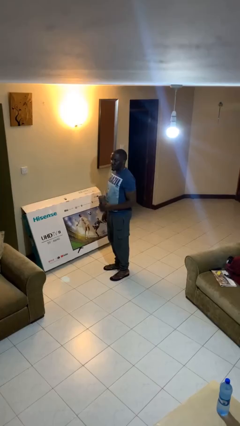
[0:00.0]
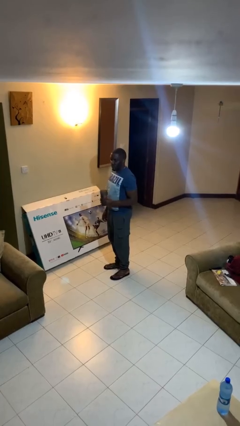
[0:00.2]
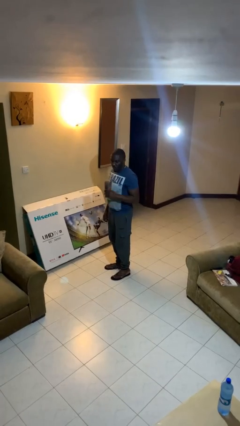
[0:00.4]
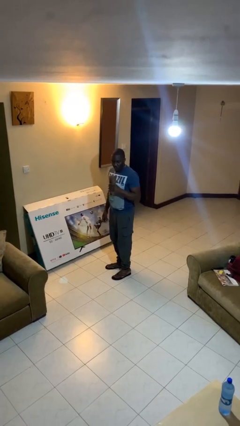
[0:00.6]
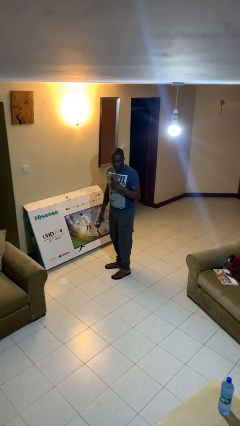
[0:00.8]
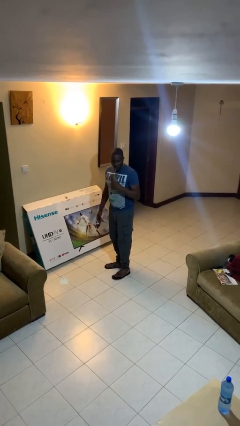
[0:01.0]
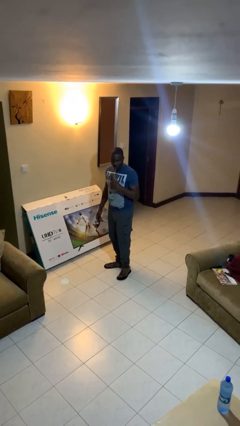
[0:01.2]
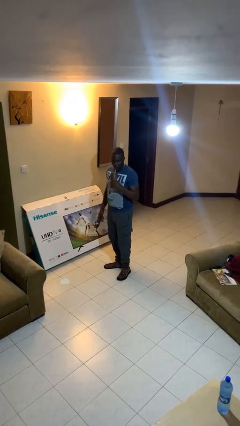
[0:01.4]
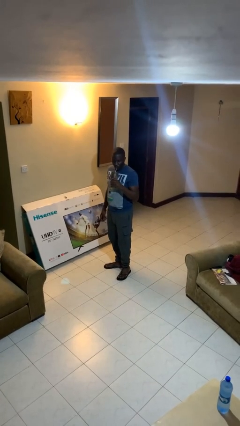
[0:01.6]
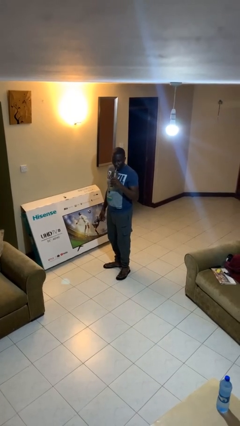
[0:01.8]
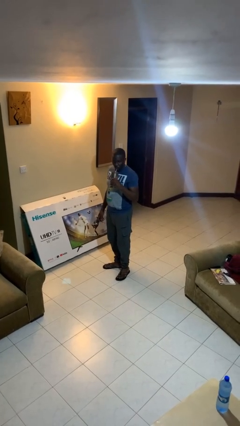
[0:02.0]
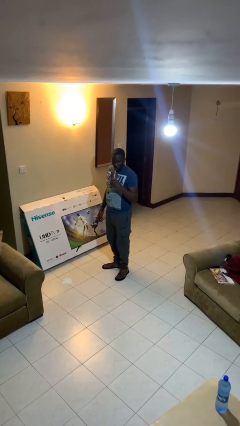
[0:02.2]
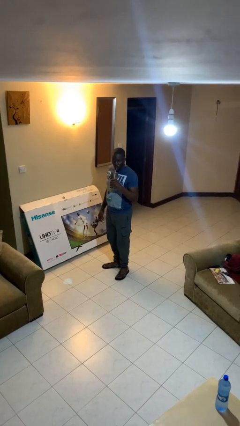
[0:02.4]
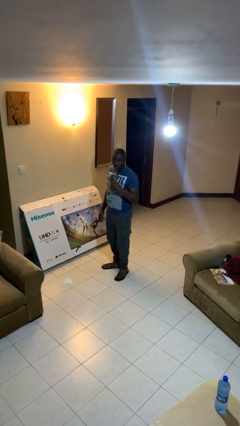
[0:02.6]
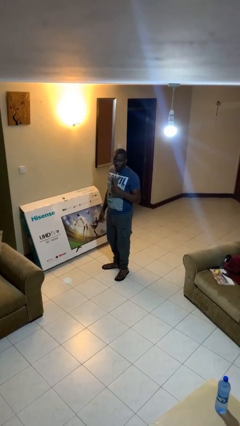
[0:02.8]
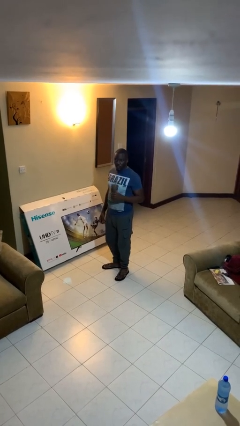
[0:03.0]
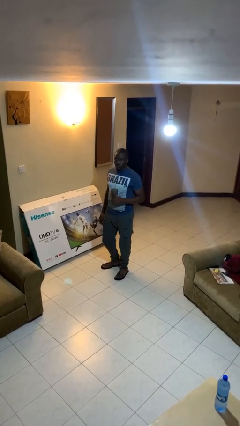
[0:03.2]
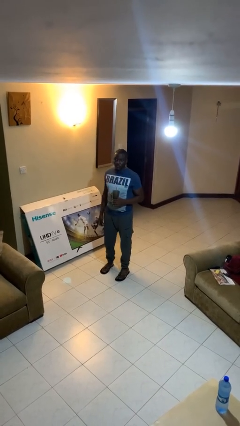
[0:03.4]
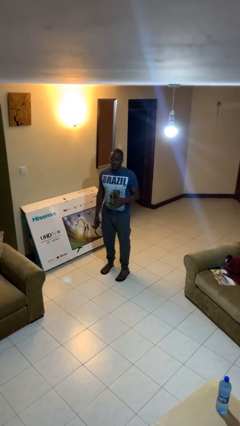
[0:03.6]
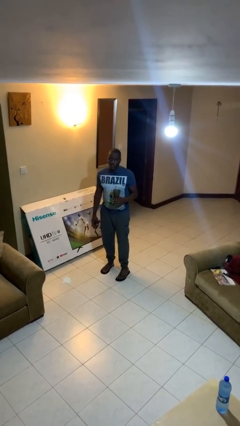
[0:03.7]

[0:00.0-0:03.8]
person drinks from straw

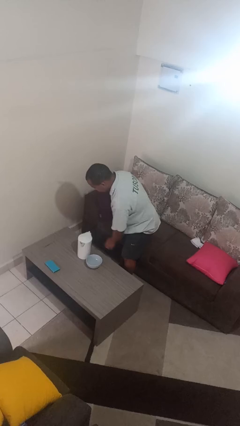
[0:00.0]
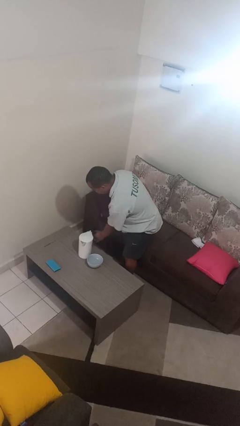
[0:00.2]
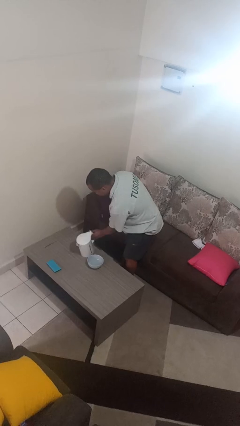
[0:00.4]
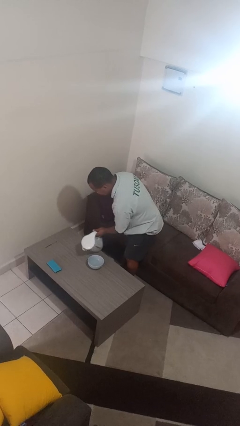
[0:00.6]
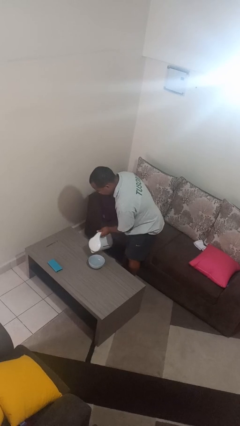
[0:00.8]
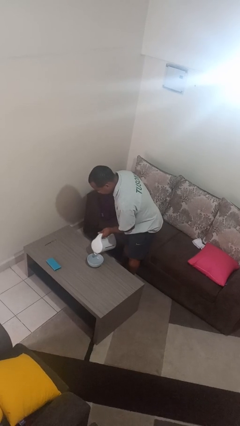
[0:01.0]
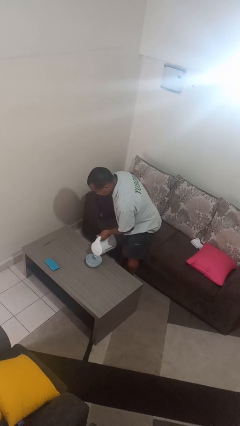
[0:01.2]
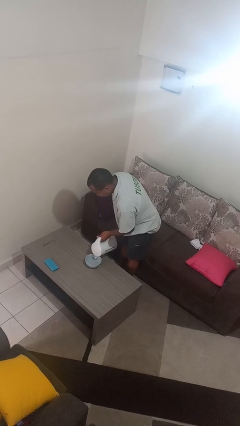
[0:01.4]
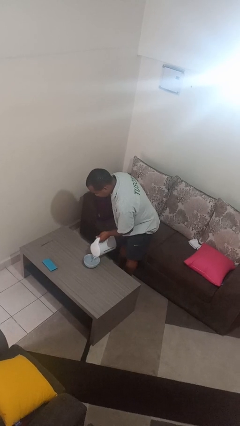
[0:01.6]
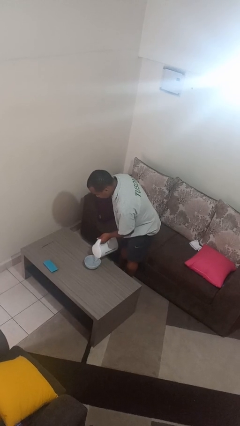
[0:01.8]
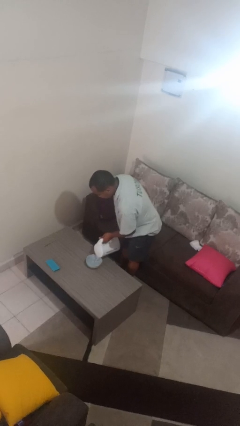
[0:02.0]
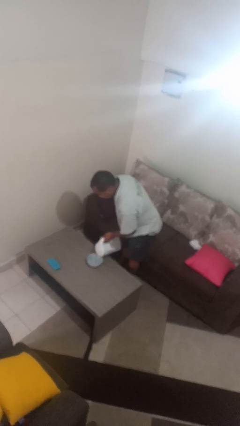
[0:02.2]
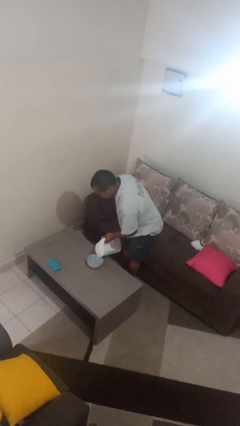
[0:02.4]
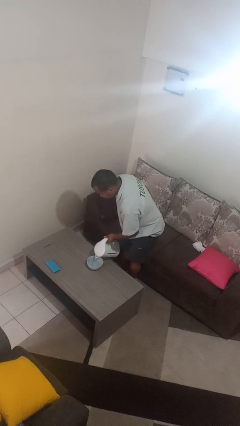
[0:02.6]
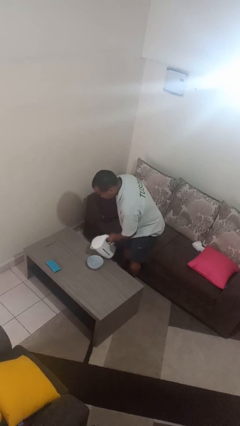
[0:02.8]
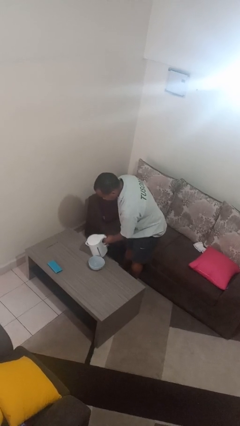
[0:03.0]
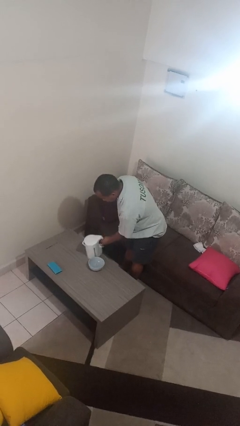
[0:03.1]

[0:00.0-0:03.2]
person pours into bowl

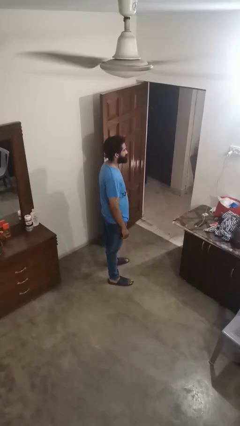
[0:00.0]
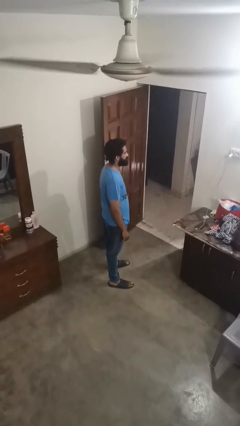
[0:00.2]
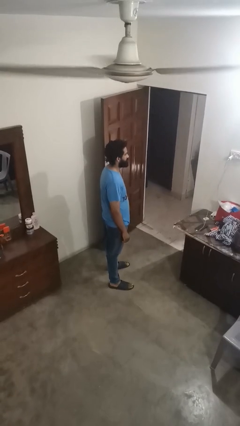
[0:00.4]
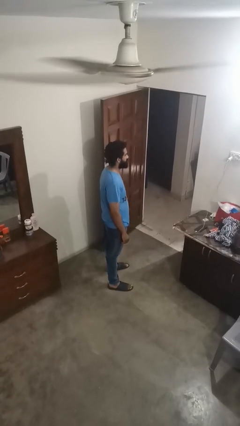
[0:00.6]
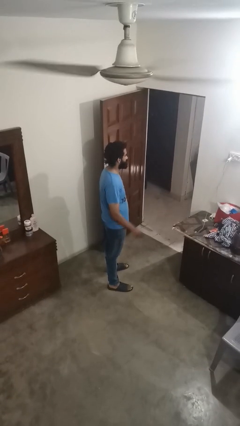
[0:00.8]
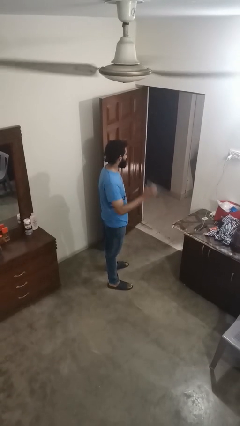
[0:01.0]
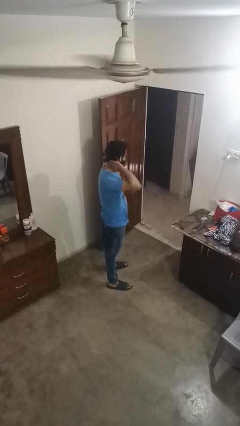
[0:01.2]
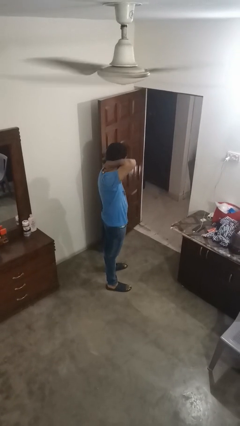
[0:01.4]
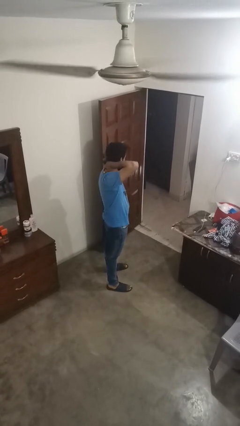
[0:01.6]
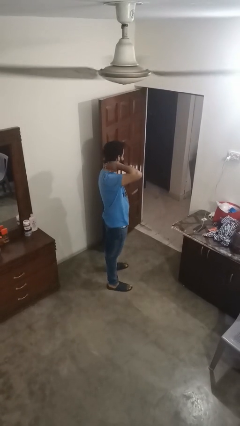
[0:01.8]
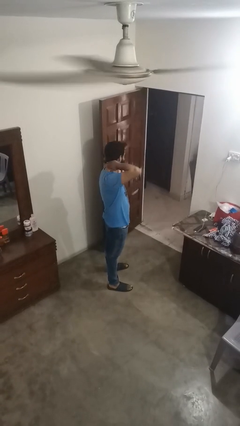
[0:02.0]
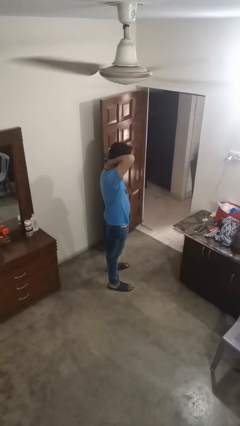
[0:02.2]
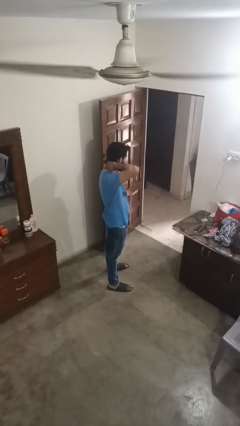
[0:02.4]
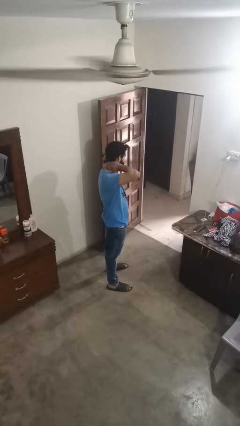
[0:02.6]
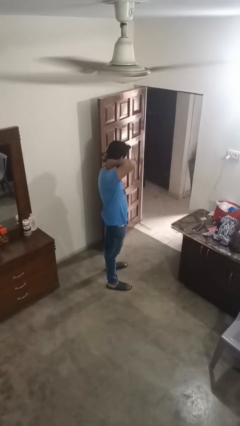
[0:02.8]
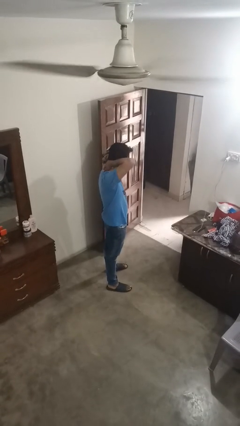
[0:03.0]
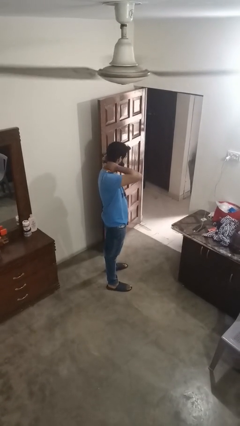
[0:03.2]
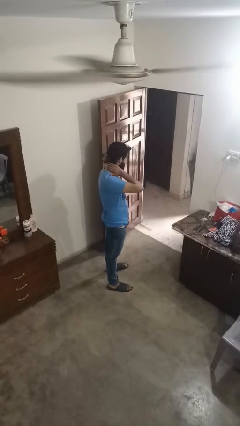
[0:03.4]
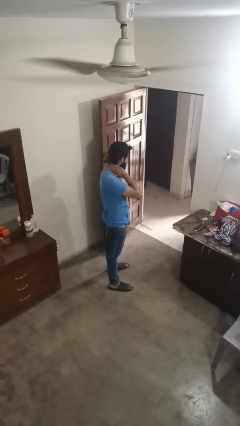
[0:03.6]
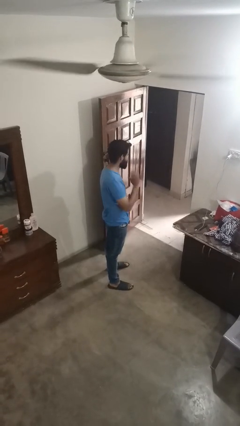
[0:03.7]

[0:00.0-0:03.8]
person rubs neck

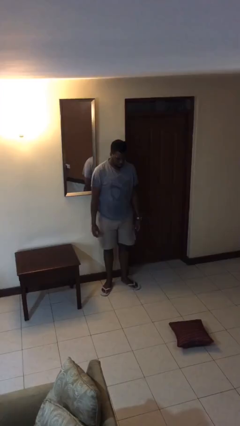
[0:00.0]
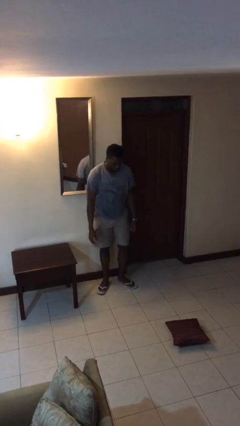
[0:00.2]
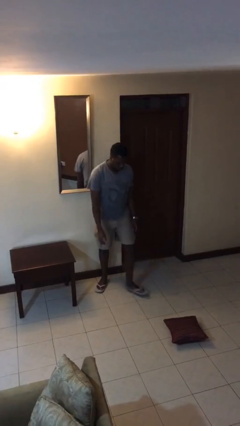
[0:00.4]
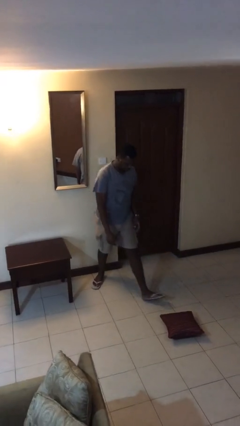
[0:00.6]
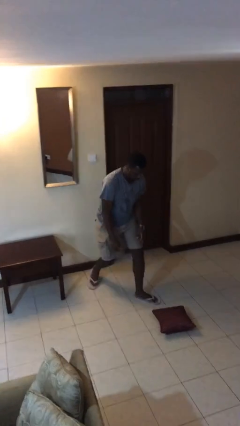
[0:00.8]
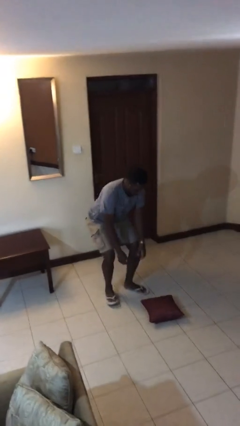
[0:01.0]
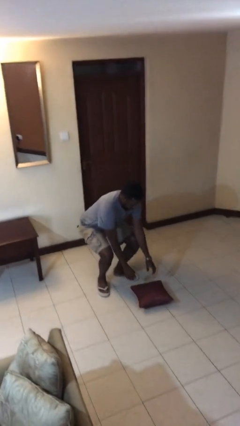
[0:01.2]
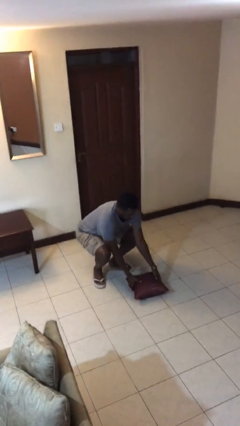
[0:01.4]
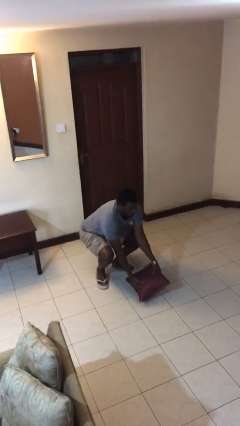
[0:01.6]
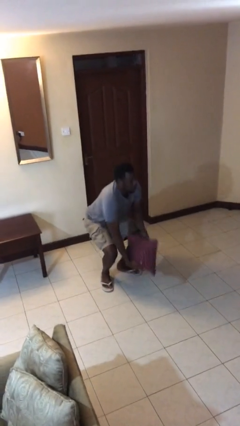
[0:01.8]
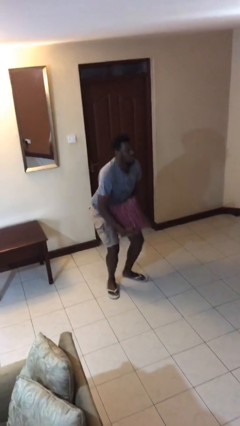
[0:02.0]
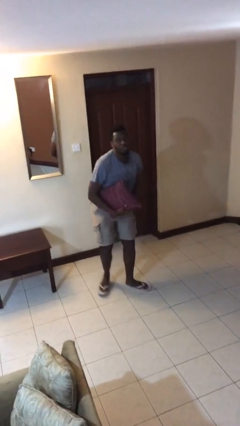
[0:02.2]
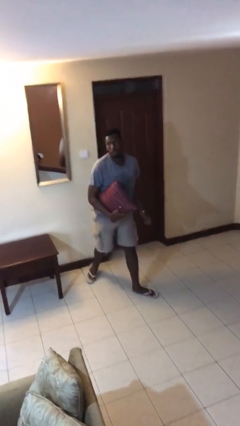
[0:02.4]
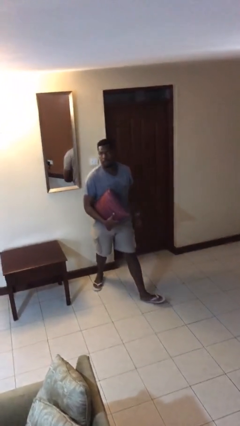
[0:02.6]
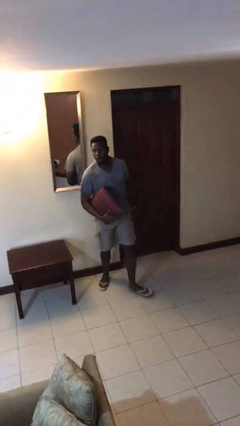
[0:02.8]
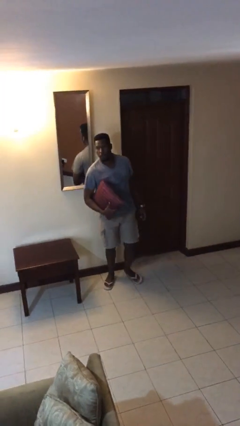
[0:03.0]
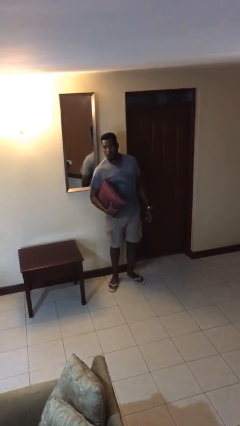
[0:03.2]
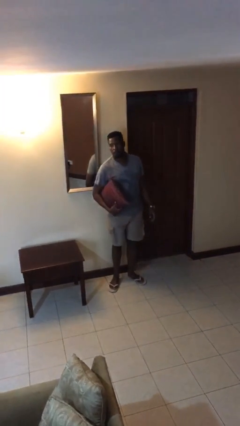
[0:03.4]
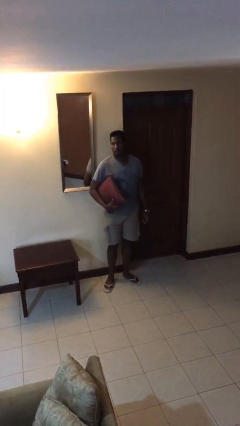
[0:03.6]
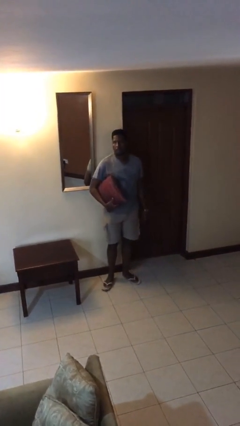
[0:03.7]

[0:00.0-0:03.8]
person picks up object from floor

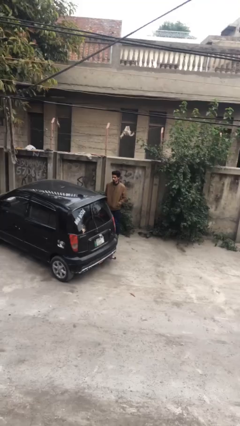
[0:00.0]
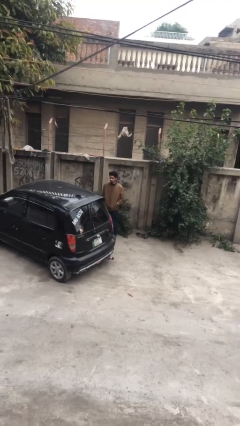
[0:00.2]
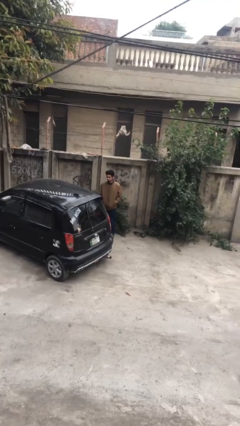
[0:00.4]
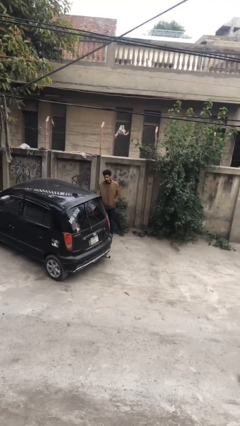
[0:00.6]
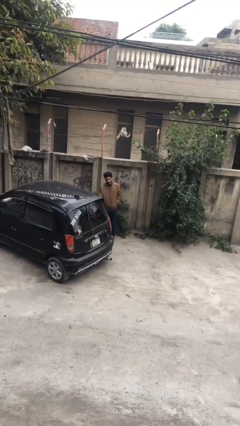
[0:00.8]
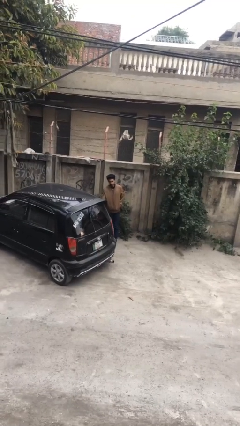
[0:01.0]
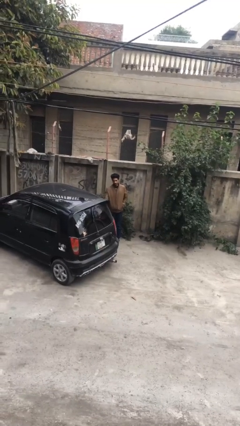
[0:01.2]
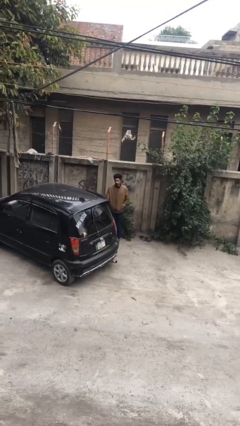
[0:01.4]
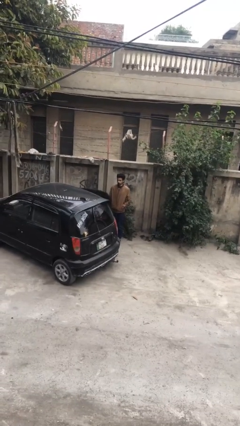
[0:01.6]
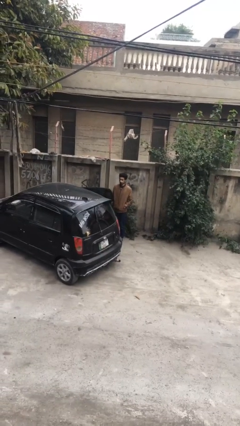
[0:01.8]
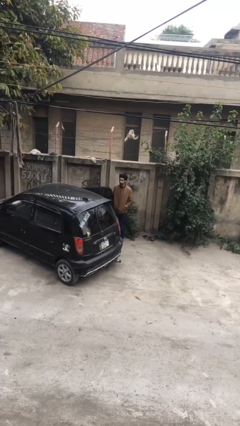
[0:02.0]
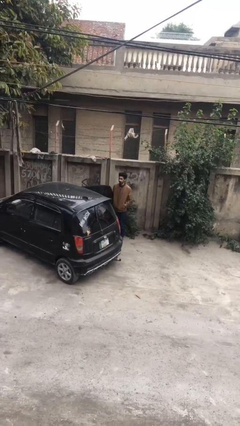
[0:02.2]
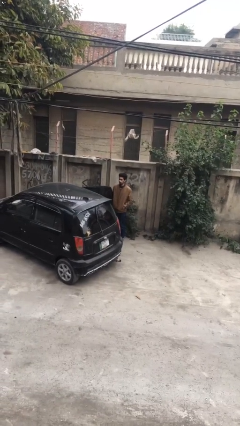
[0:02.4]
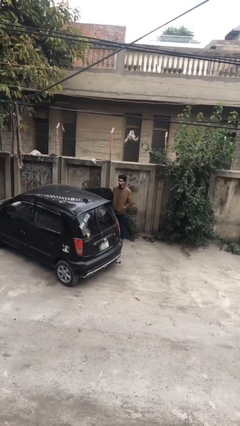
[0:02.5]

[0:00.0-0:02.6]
person opens car door
